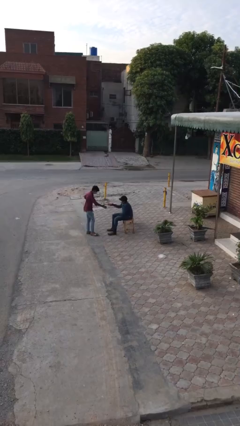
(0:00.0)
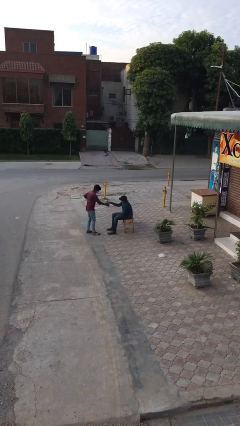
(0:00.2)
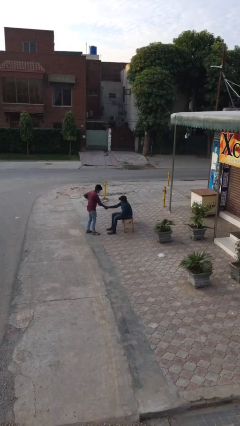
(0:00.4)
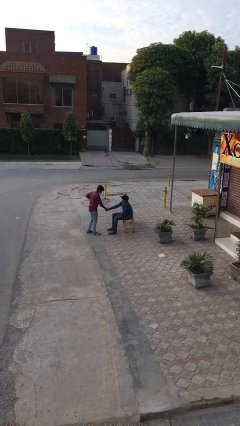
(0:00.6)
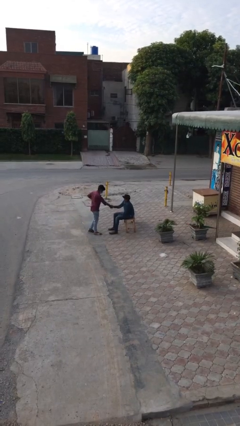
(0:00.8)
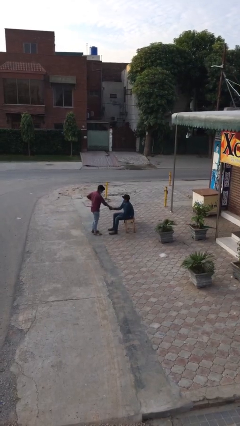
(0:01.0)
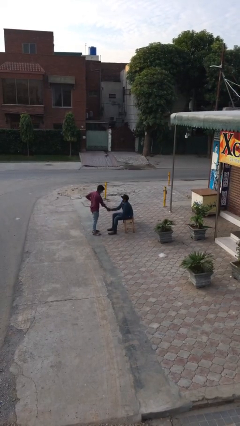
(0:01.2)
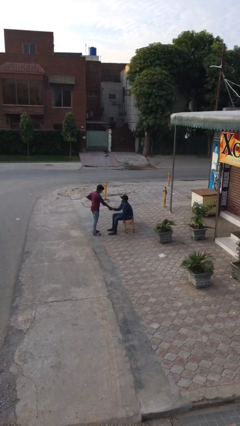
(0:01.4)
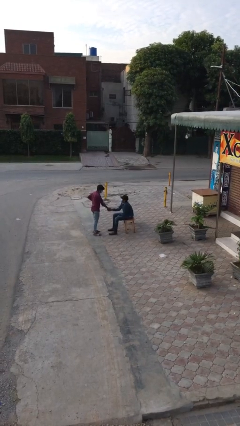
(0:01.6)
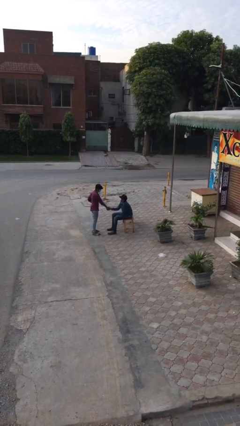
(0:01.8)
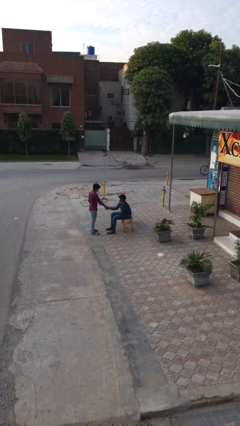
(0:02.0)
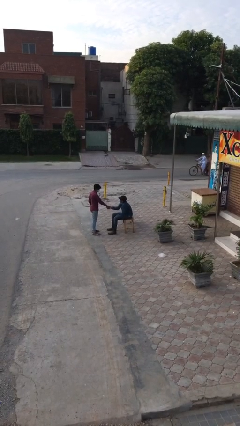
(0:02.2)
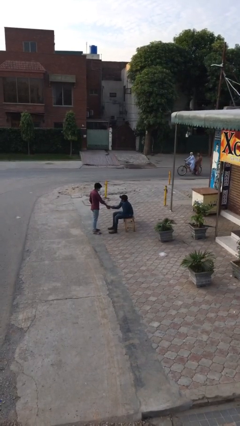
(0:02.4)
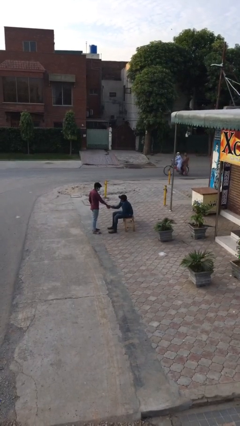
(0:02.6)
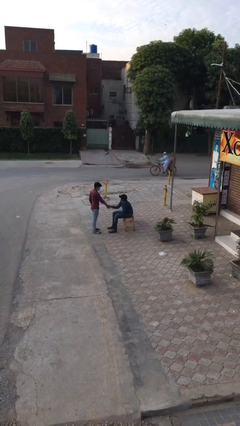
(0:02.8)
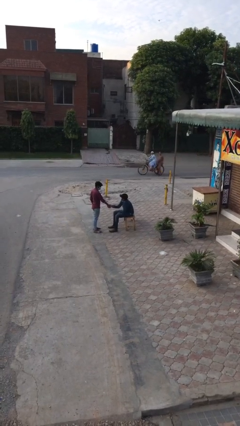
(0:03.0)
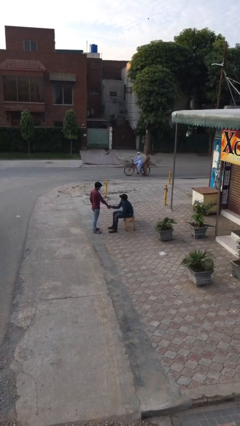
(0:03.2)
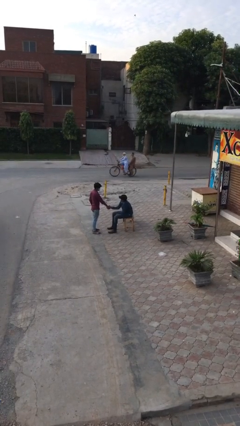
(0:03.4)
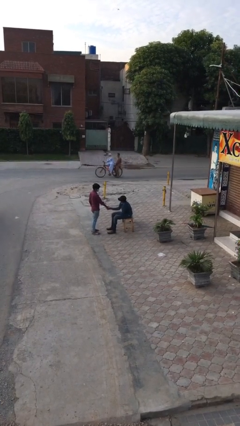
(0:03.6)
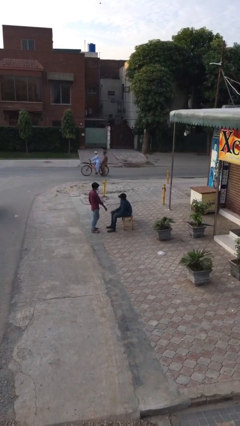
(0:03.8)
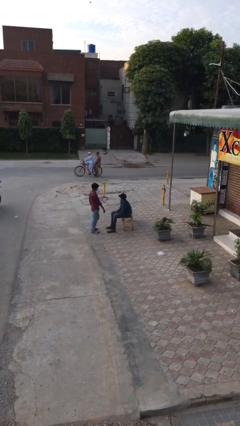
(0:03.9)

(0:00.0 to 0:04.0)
person shakes hand

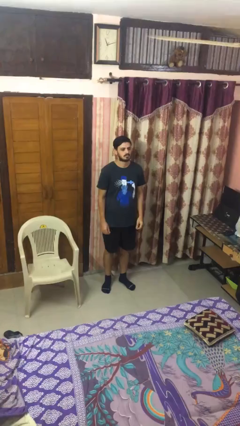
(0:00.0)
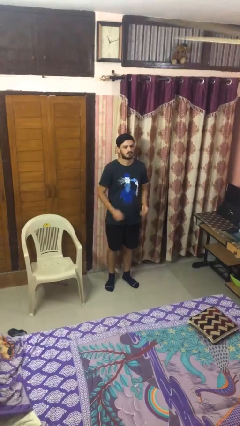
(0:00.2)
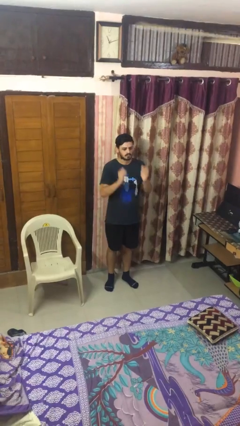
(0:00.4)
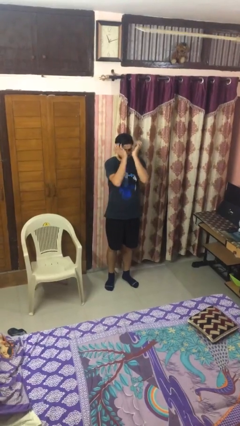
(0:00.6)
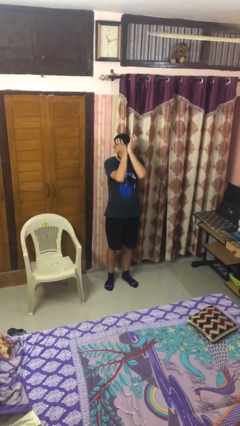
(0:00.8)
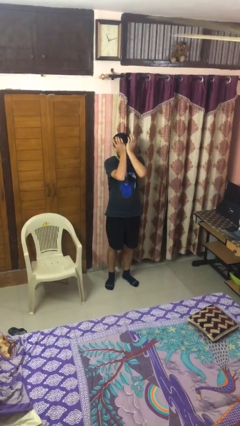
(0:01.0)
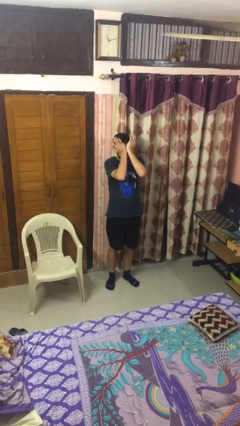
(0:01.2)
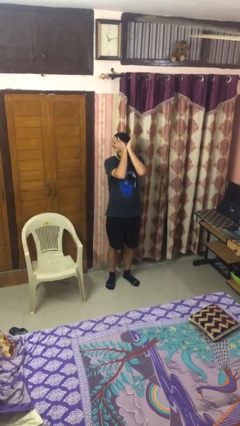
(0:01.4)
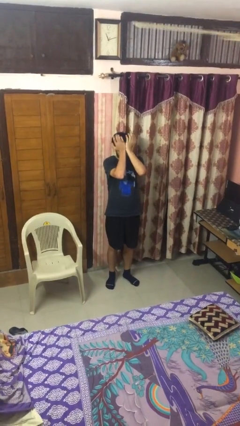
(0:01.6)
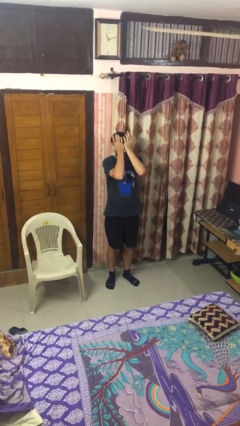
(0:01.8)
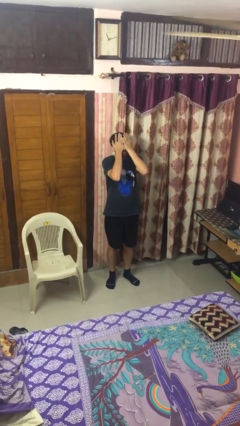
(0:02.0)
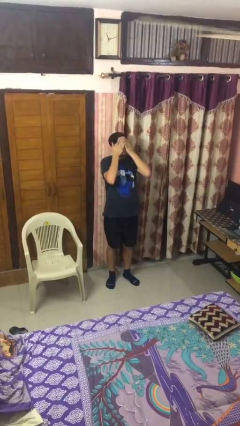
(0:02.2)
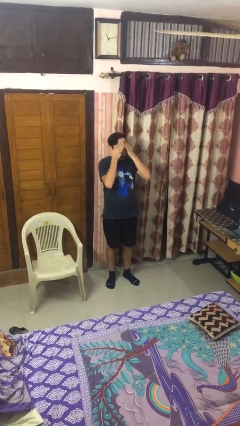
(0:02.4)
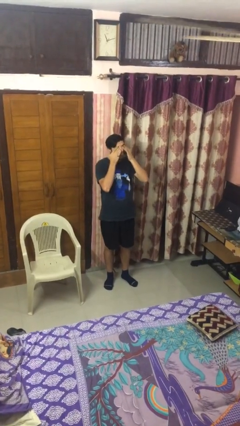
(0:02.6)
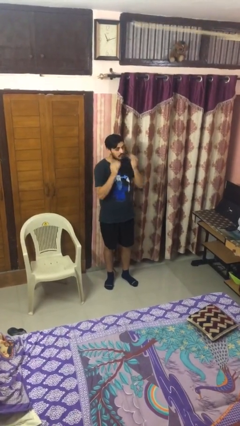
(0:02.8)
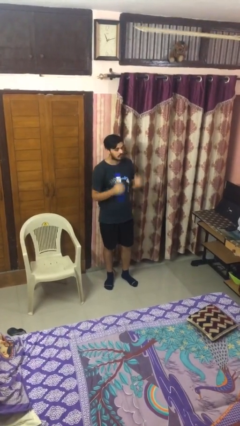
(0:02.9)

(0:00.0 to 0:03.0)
person rubs eyes

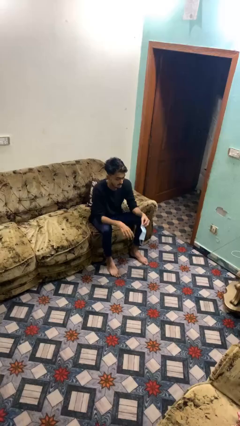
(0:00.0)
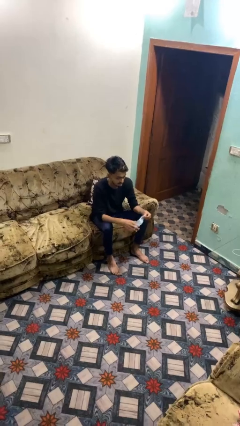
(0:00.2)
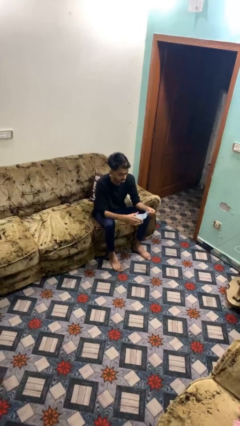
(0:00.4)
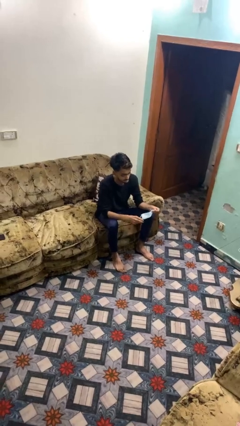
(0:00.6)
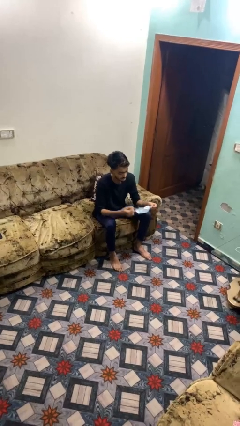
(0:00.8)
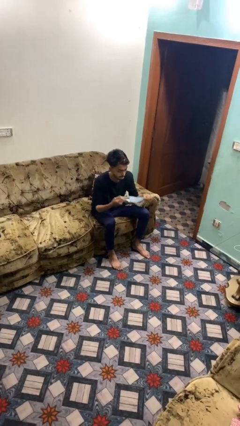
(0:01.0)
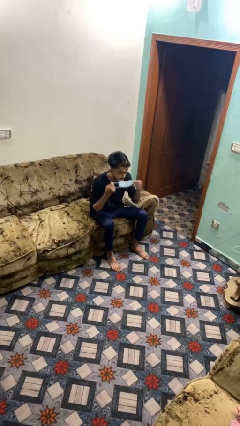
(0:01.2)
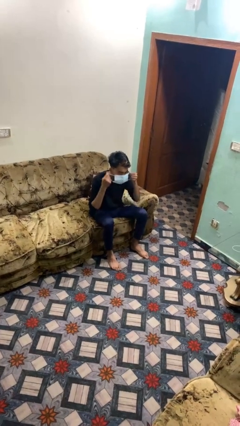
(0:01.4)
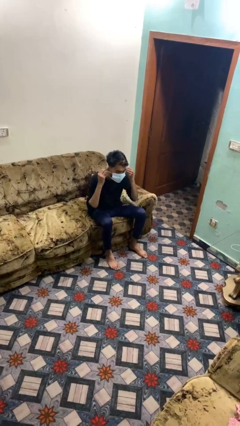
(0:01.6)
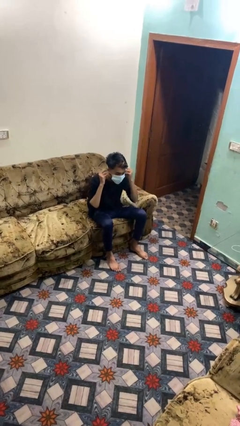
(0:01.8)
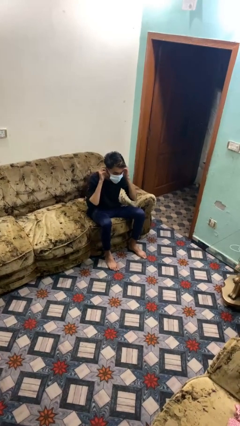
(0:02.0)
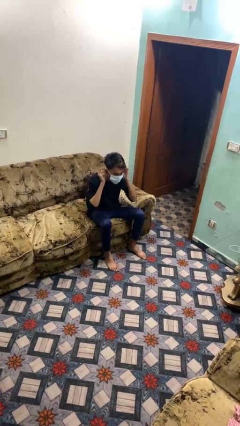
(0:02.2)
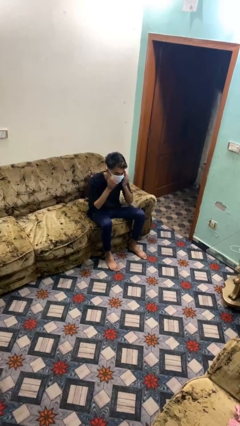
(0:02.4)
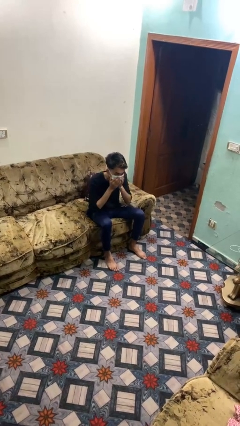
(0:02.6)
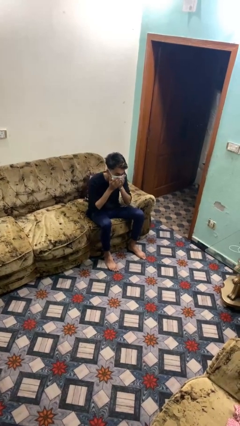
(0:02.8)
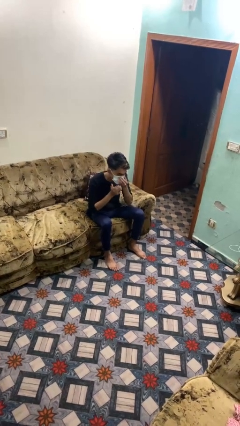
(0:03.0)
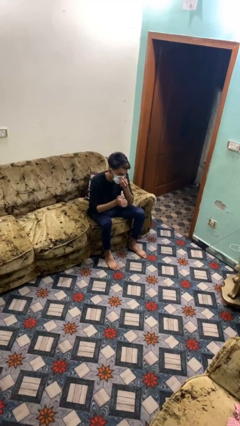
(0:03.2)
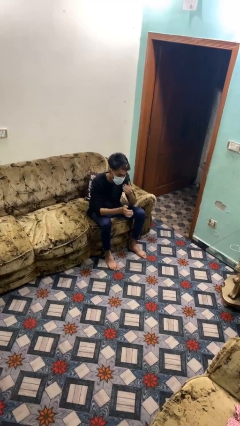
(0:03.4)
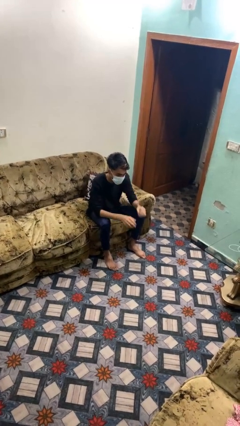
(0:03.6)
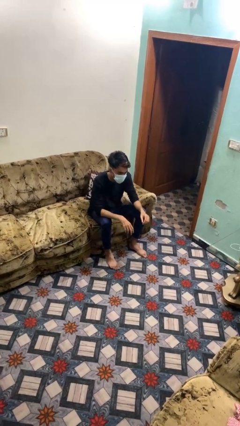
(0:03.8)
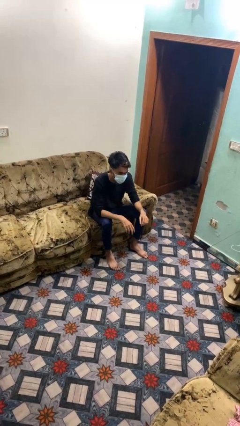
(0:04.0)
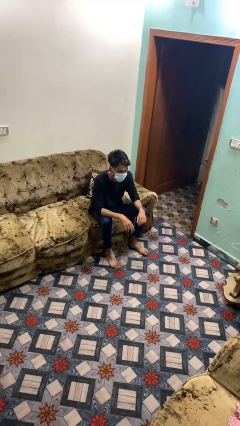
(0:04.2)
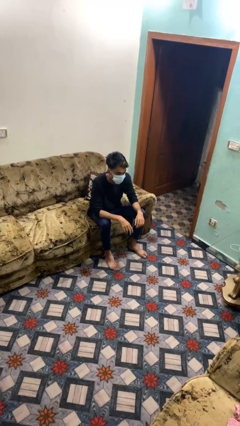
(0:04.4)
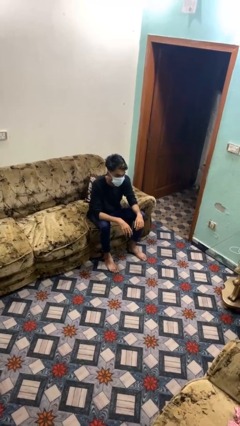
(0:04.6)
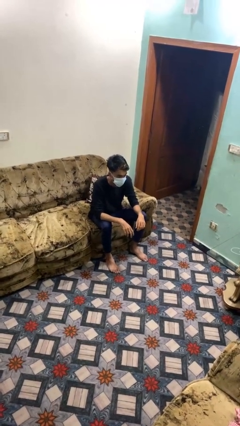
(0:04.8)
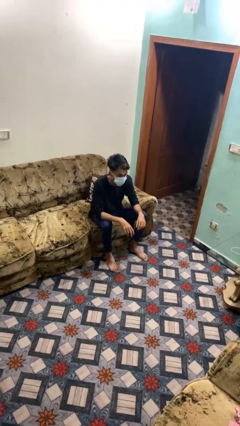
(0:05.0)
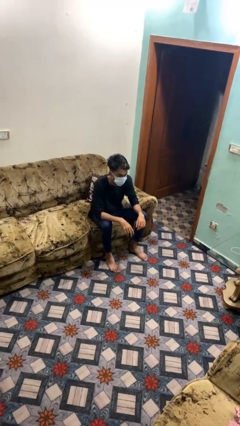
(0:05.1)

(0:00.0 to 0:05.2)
person puts on facemask

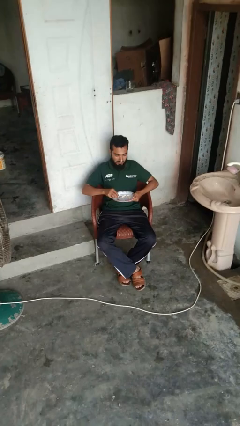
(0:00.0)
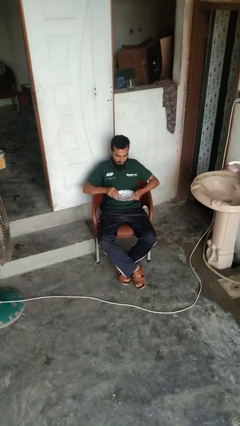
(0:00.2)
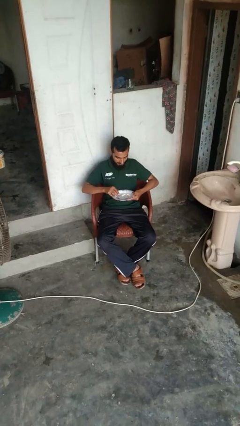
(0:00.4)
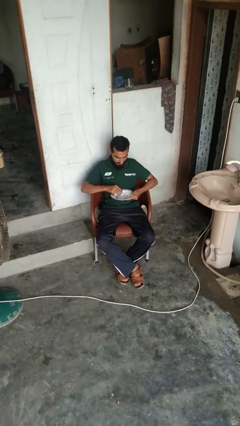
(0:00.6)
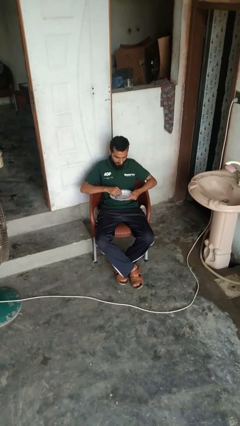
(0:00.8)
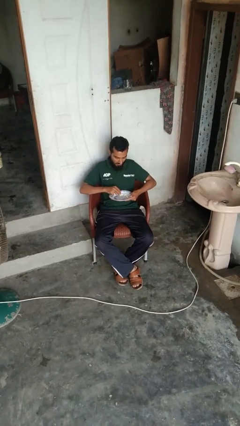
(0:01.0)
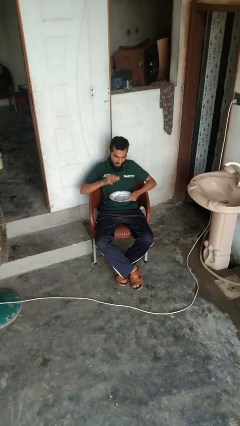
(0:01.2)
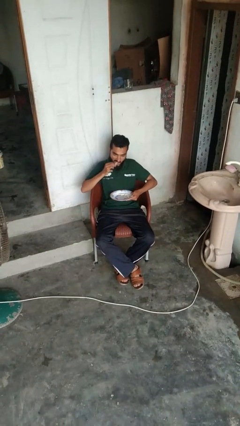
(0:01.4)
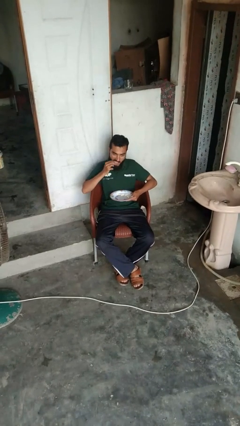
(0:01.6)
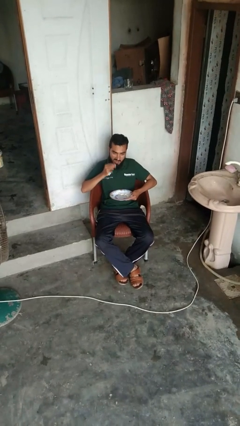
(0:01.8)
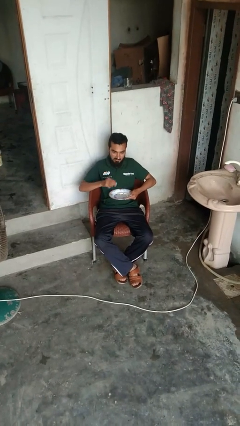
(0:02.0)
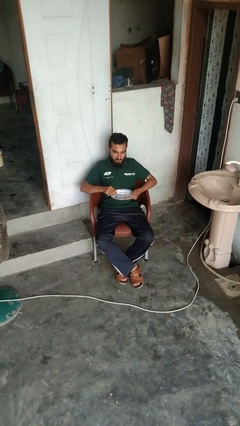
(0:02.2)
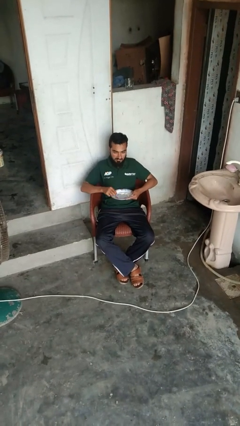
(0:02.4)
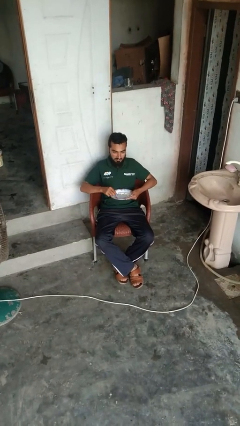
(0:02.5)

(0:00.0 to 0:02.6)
person eats with hands

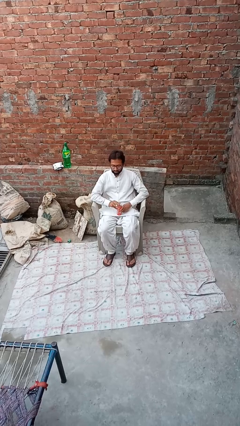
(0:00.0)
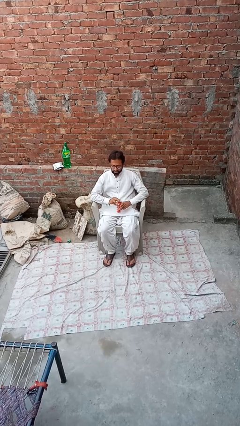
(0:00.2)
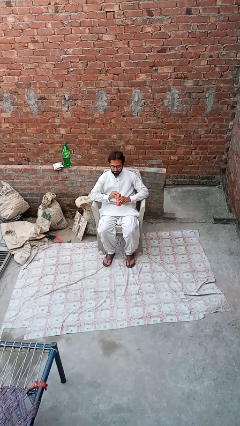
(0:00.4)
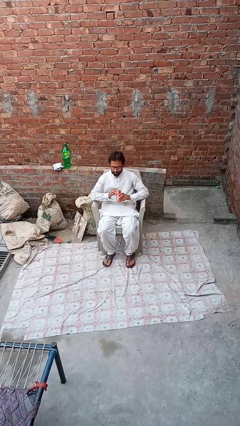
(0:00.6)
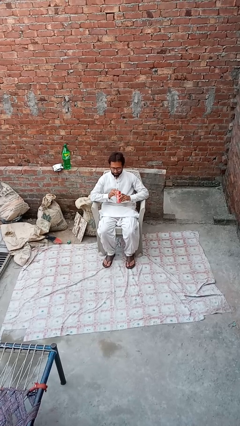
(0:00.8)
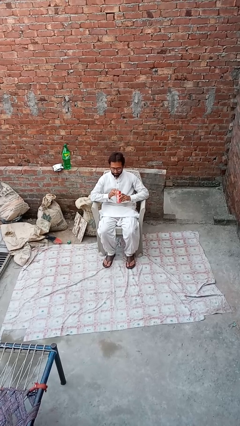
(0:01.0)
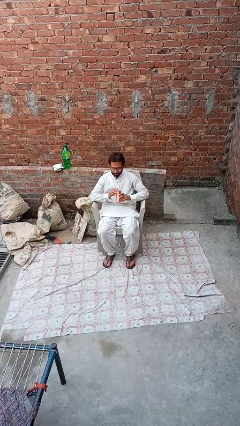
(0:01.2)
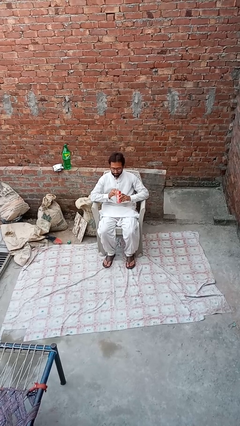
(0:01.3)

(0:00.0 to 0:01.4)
person drinks from straw

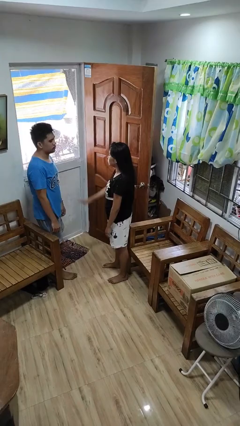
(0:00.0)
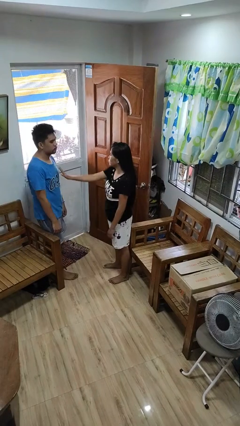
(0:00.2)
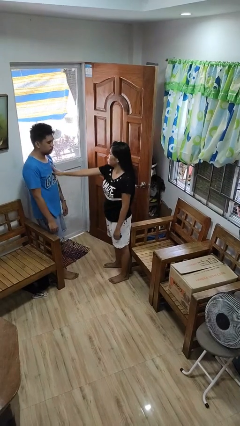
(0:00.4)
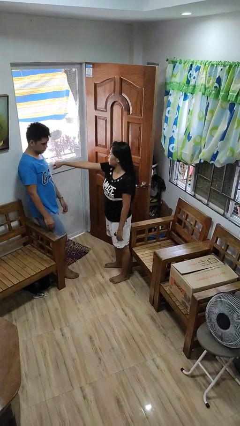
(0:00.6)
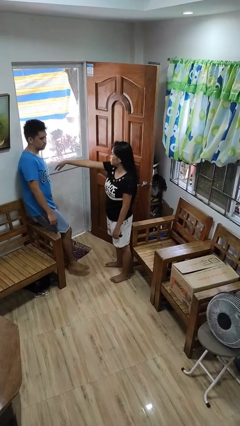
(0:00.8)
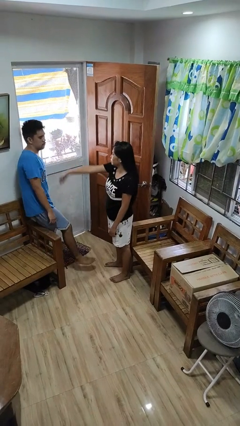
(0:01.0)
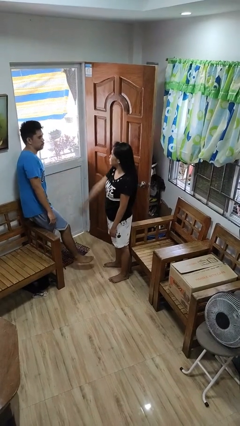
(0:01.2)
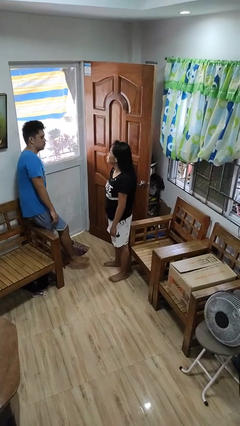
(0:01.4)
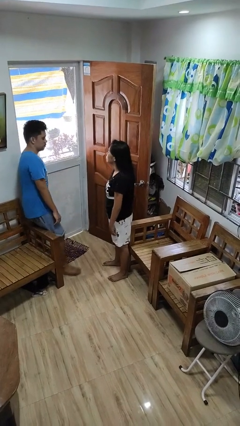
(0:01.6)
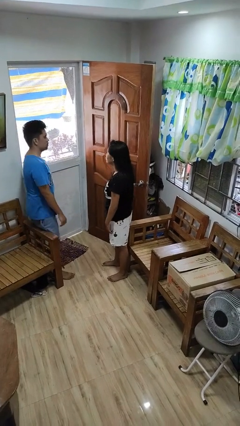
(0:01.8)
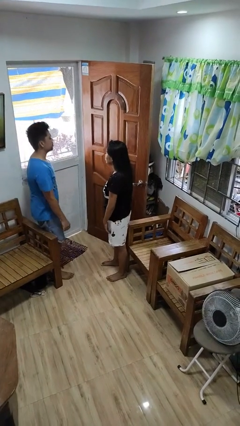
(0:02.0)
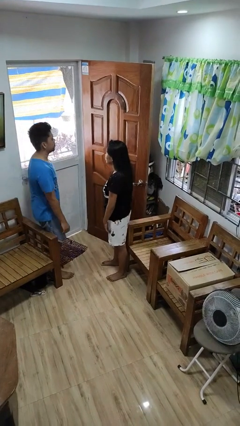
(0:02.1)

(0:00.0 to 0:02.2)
person shoves person
